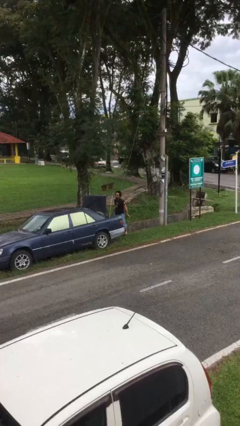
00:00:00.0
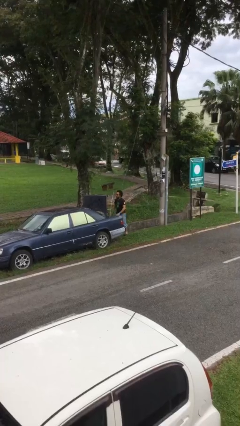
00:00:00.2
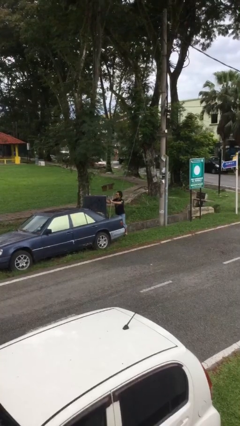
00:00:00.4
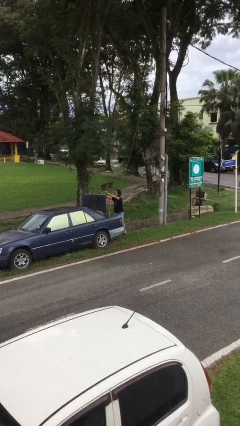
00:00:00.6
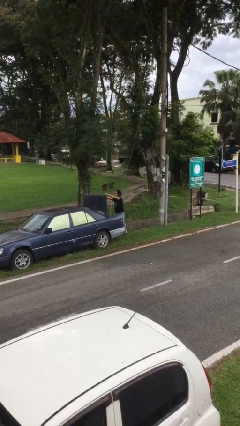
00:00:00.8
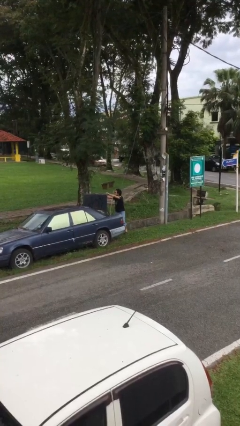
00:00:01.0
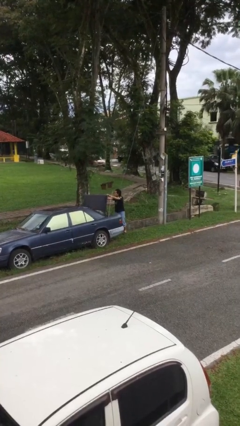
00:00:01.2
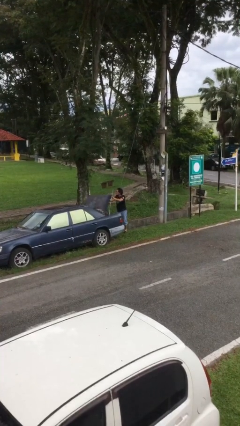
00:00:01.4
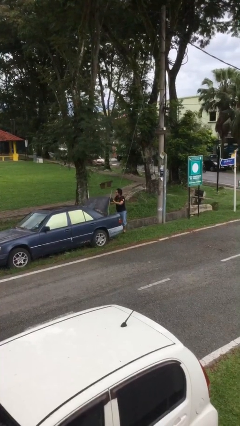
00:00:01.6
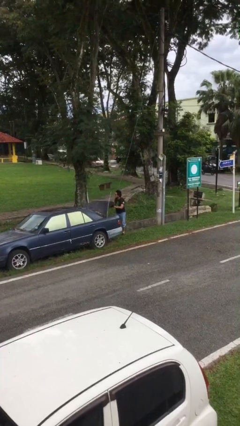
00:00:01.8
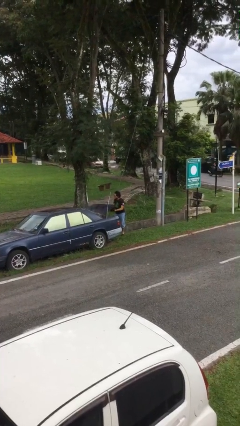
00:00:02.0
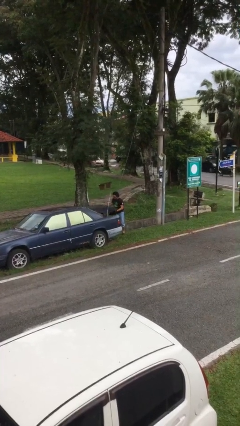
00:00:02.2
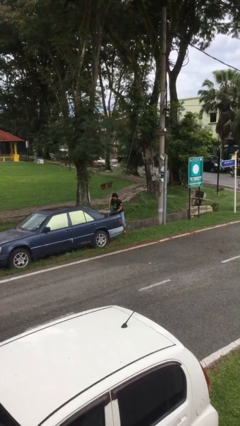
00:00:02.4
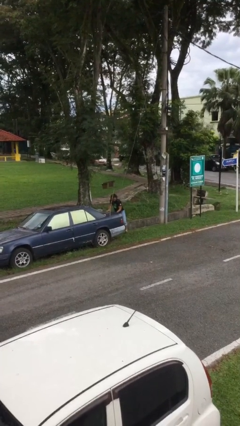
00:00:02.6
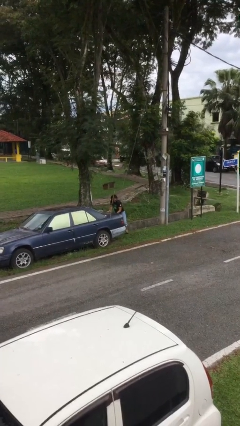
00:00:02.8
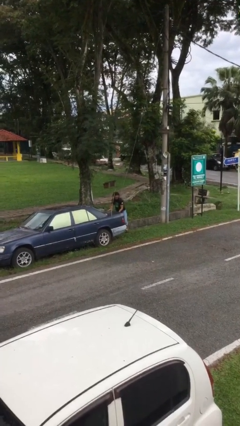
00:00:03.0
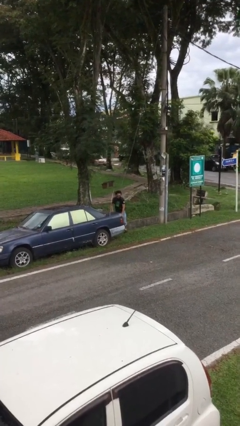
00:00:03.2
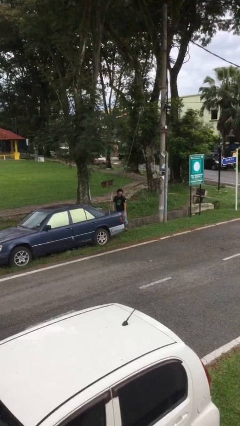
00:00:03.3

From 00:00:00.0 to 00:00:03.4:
person closes car trunk

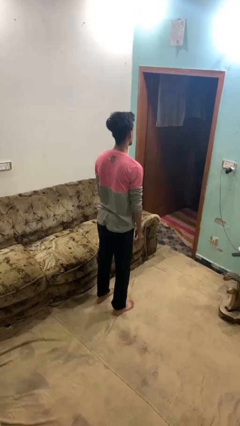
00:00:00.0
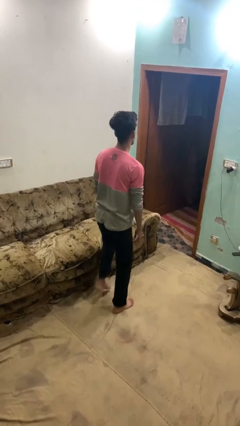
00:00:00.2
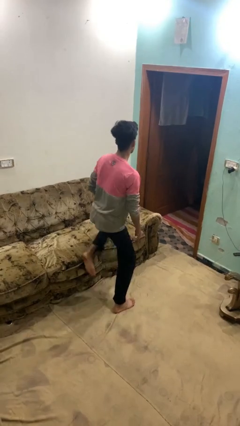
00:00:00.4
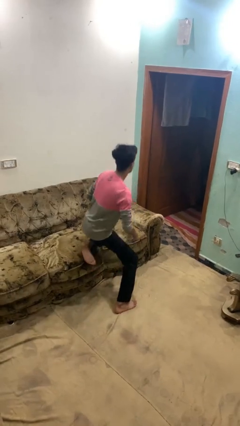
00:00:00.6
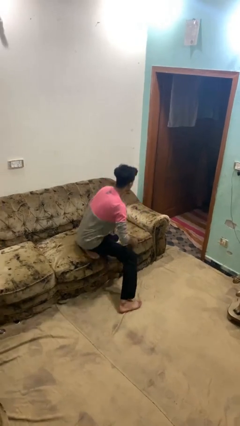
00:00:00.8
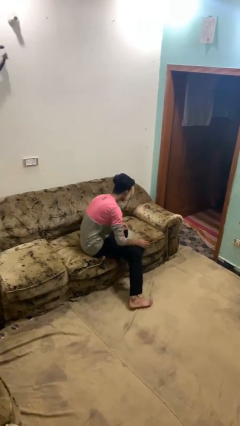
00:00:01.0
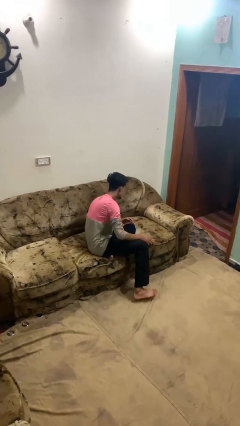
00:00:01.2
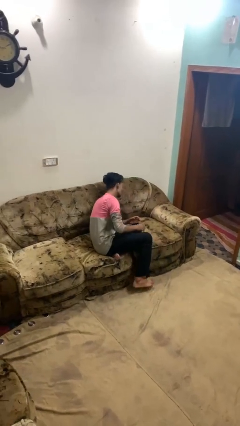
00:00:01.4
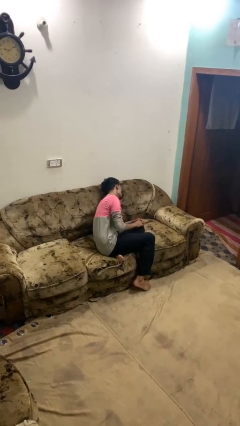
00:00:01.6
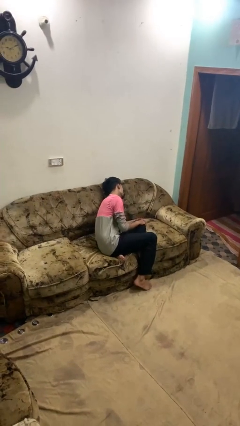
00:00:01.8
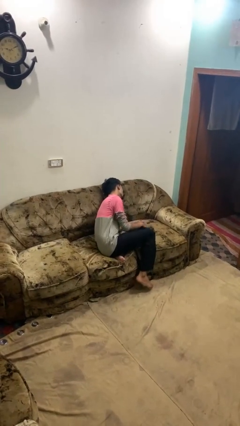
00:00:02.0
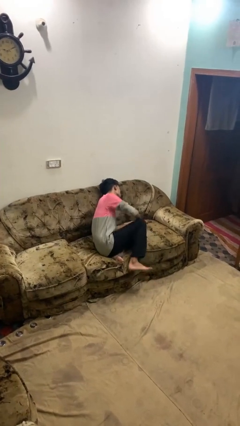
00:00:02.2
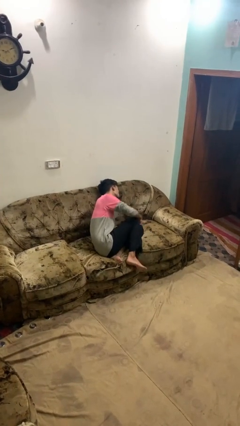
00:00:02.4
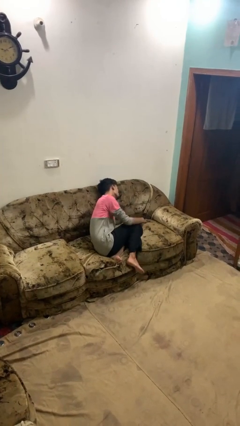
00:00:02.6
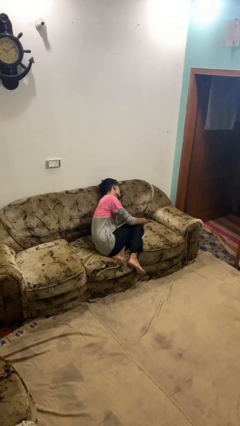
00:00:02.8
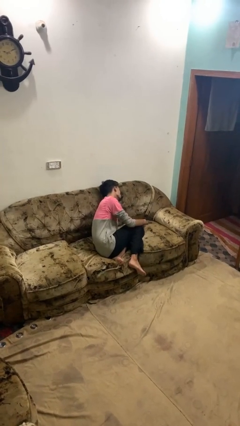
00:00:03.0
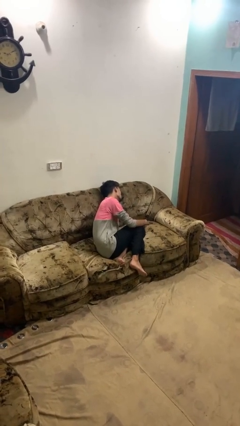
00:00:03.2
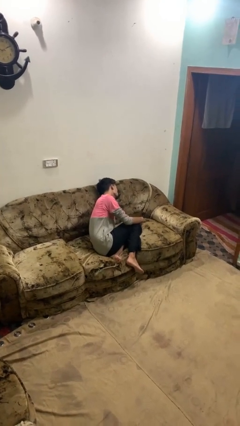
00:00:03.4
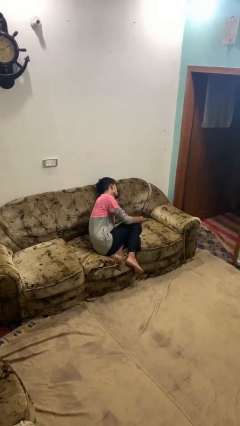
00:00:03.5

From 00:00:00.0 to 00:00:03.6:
person lies down on couch

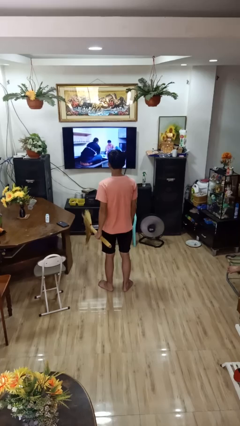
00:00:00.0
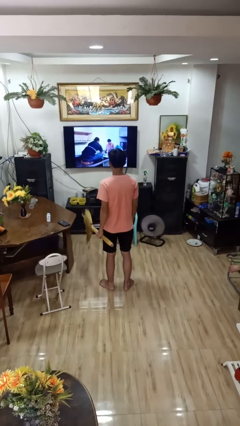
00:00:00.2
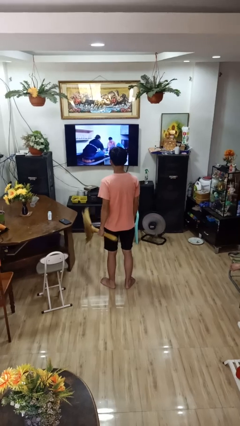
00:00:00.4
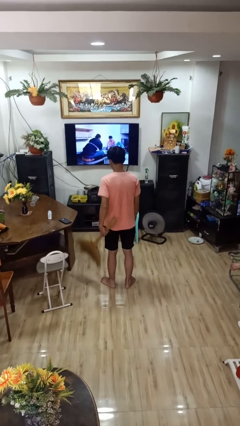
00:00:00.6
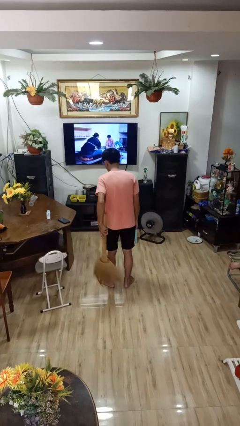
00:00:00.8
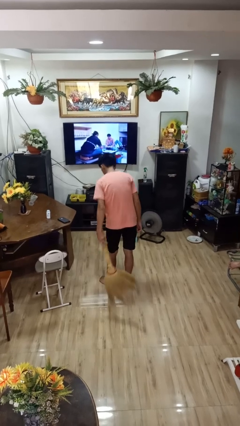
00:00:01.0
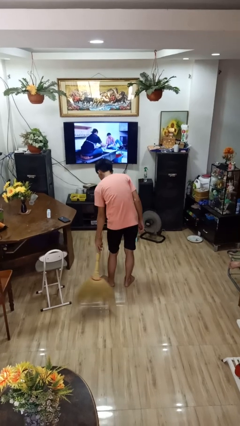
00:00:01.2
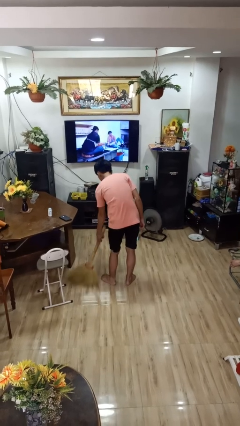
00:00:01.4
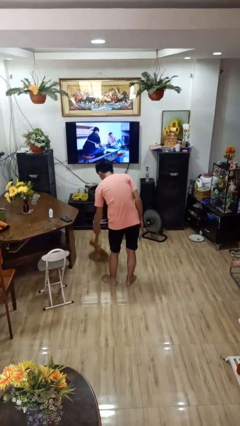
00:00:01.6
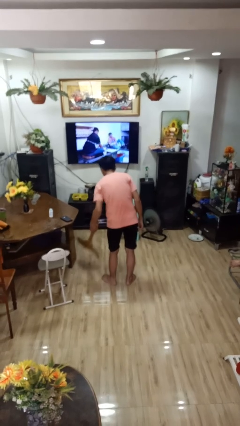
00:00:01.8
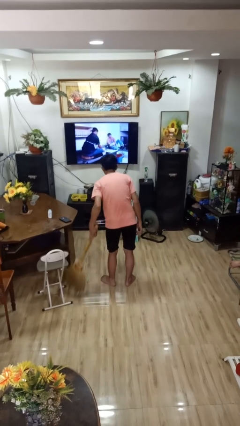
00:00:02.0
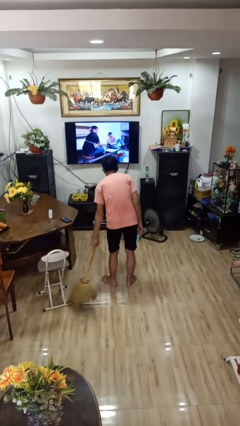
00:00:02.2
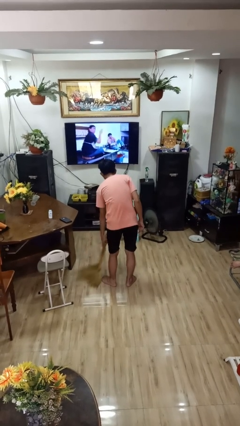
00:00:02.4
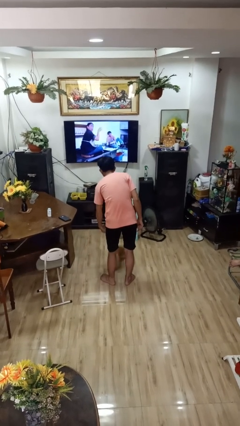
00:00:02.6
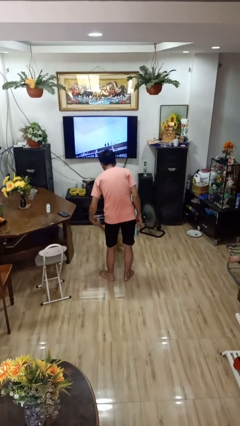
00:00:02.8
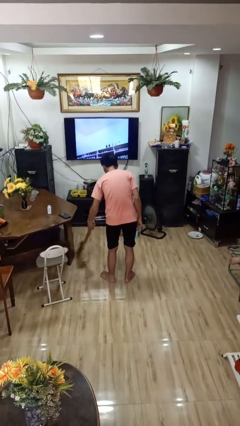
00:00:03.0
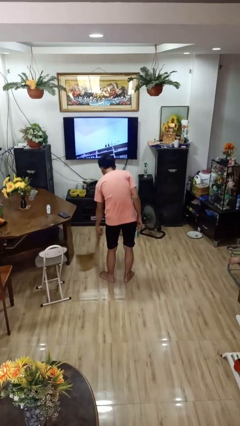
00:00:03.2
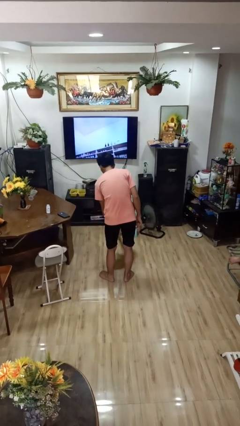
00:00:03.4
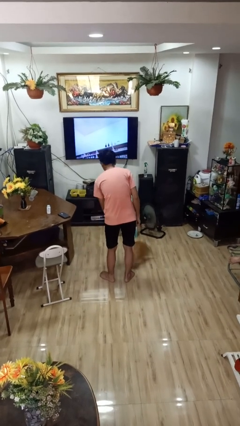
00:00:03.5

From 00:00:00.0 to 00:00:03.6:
person sweeps floor

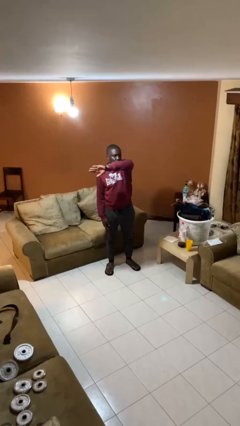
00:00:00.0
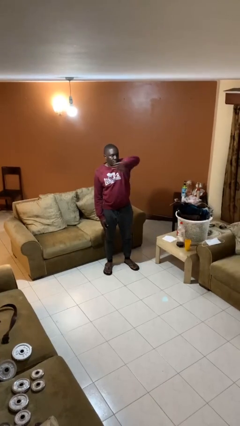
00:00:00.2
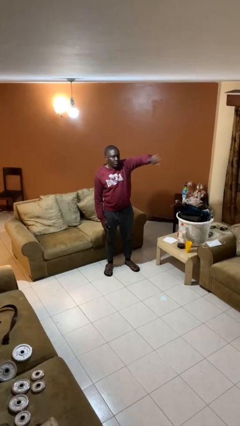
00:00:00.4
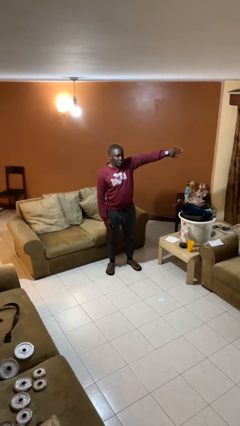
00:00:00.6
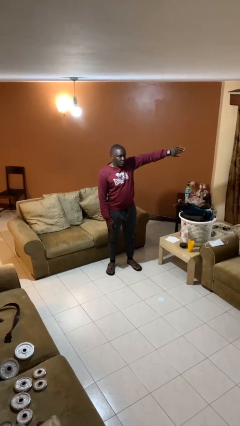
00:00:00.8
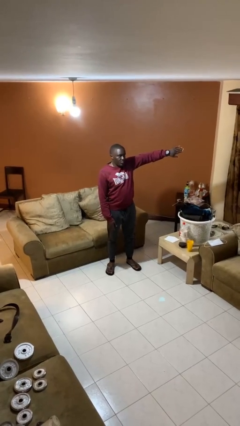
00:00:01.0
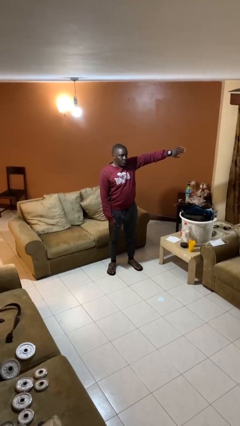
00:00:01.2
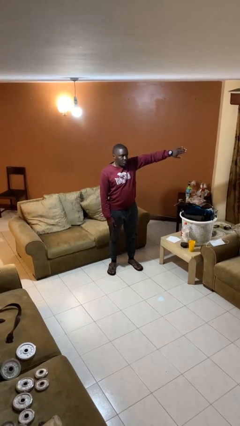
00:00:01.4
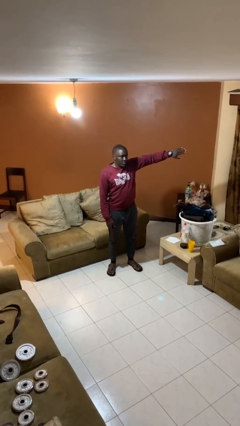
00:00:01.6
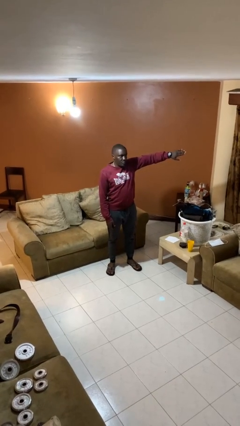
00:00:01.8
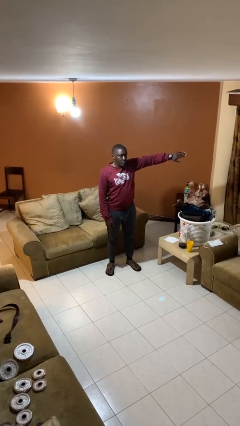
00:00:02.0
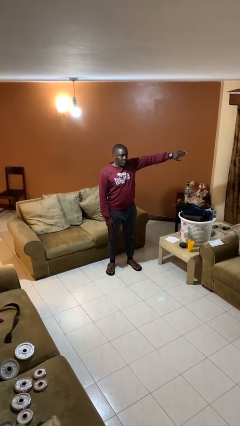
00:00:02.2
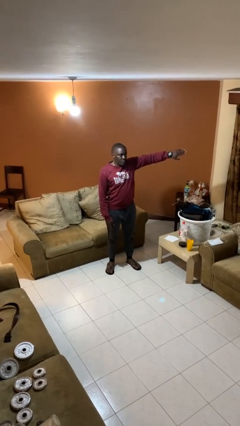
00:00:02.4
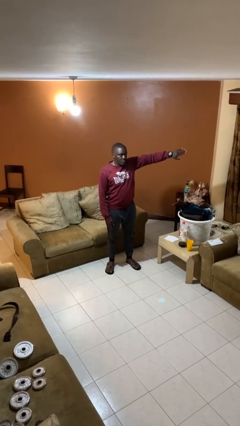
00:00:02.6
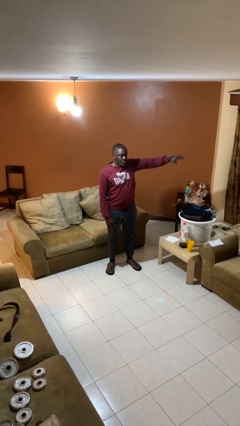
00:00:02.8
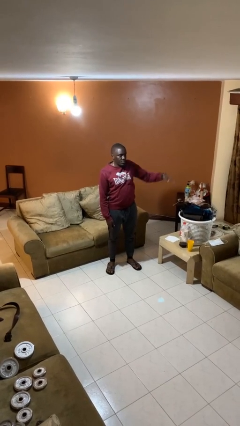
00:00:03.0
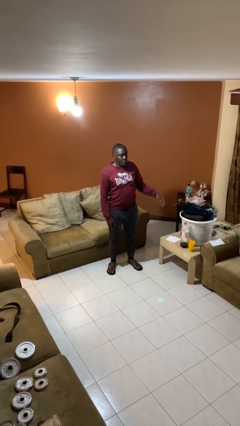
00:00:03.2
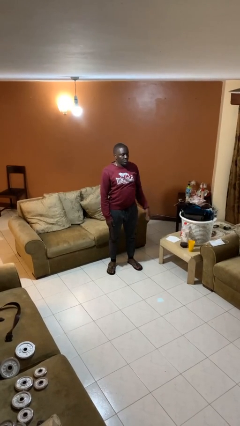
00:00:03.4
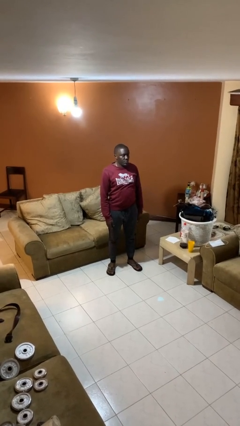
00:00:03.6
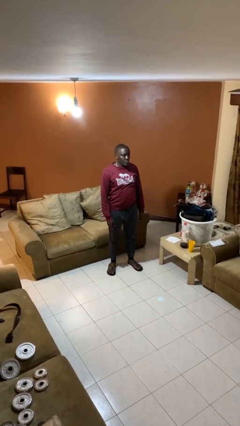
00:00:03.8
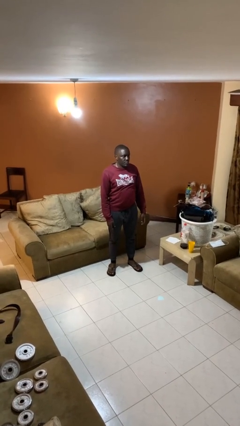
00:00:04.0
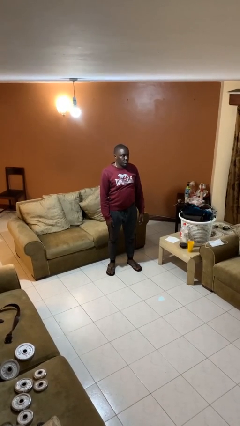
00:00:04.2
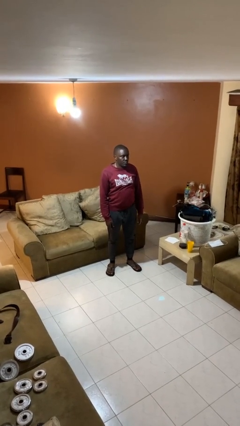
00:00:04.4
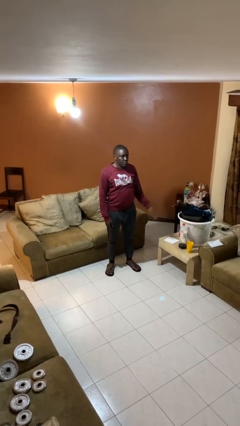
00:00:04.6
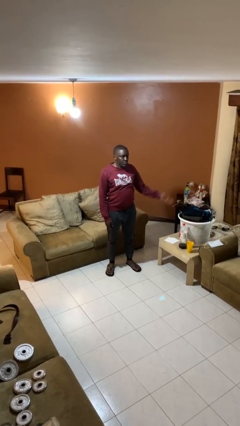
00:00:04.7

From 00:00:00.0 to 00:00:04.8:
person gestures swipe left

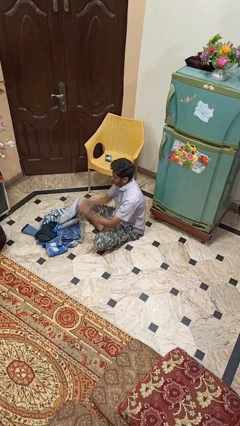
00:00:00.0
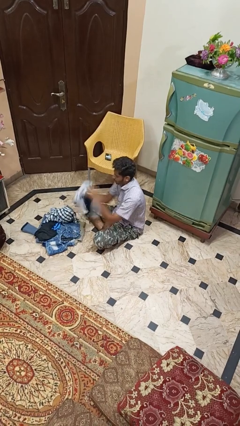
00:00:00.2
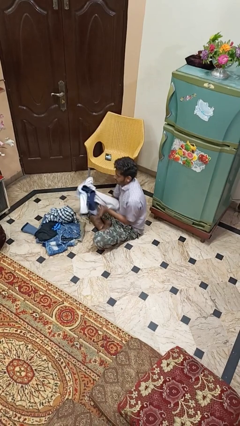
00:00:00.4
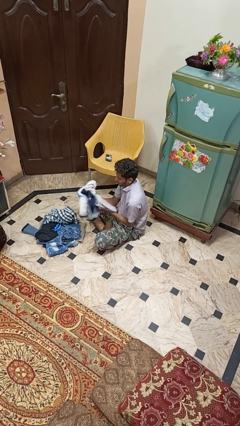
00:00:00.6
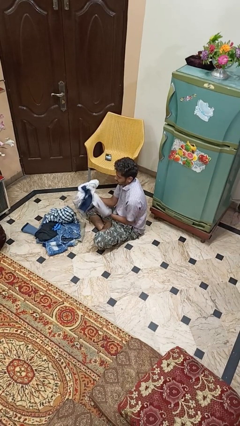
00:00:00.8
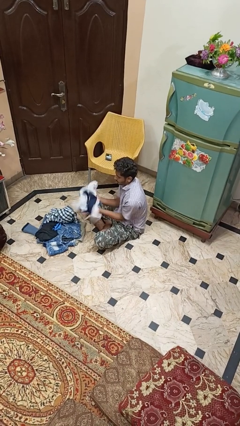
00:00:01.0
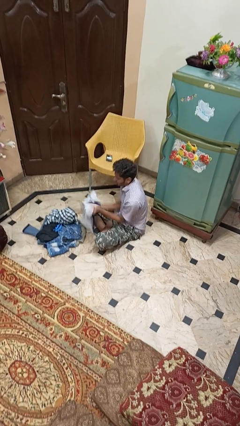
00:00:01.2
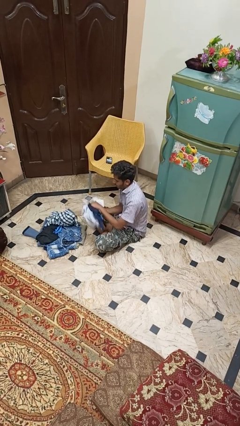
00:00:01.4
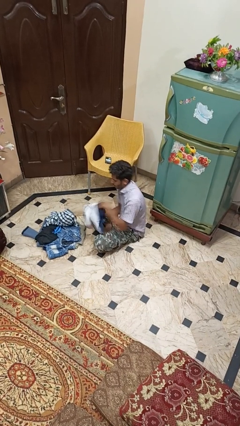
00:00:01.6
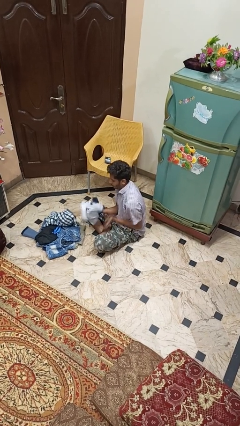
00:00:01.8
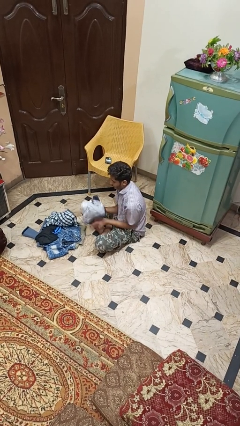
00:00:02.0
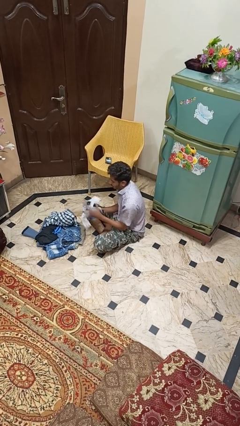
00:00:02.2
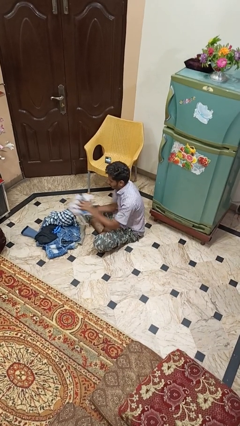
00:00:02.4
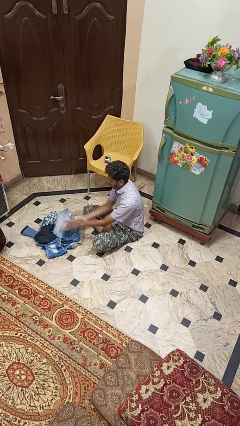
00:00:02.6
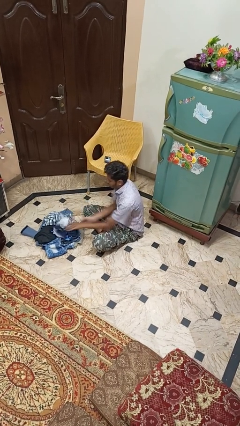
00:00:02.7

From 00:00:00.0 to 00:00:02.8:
person folds shirt
